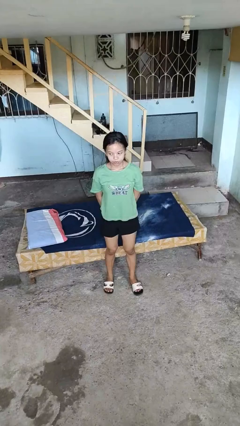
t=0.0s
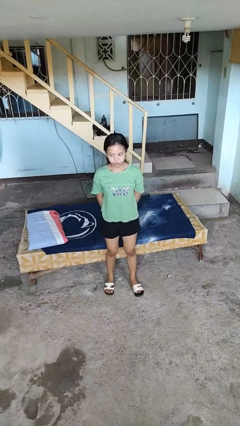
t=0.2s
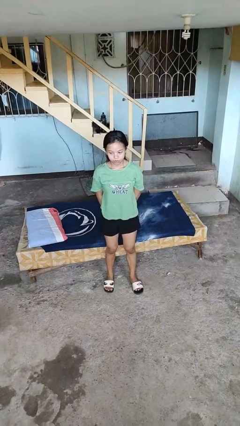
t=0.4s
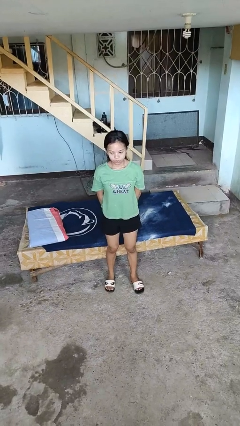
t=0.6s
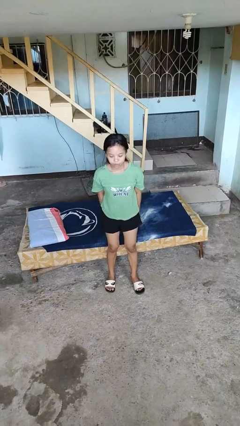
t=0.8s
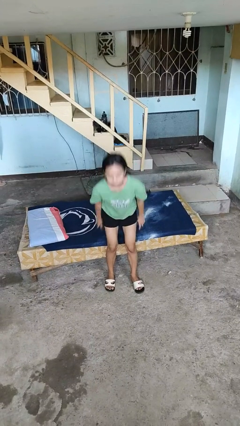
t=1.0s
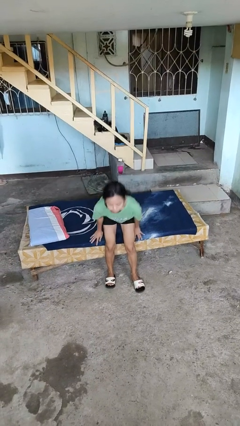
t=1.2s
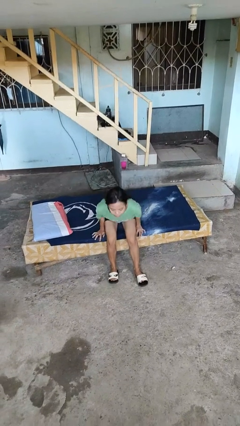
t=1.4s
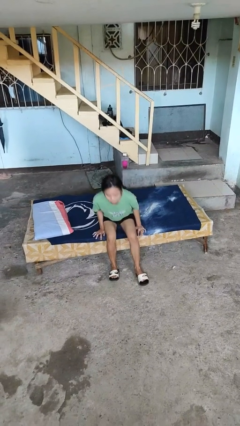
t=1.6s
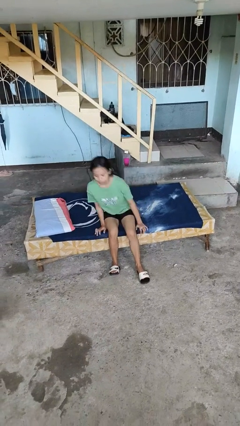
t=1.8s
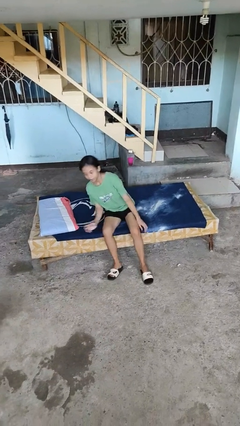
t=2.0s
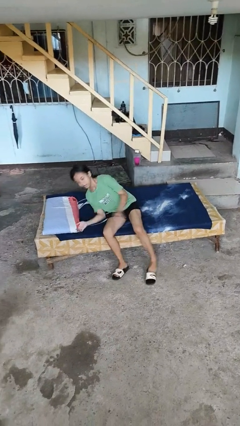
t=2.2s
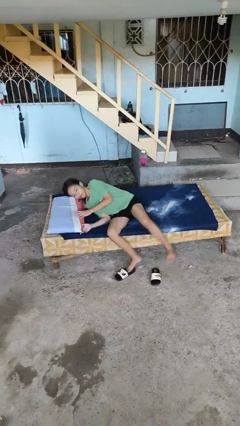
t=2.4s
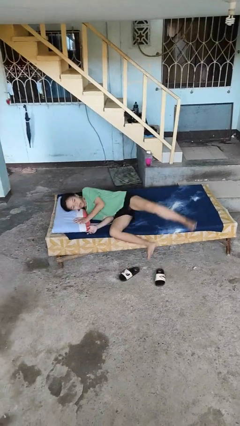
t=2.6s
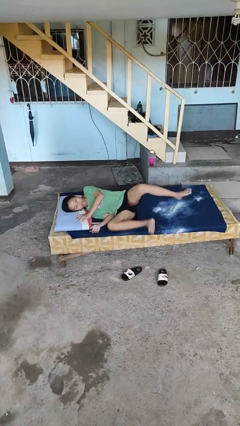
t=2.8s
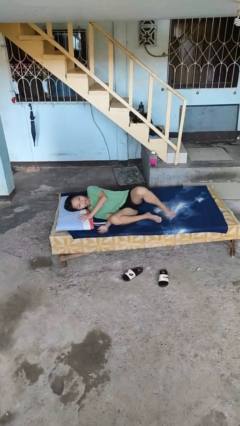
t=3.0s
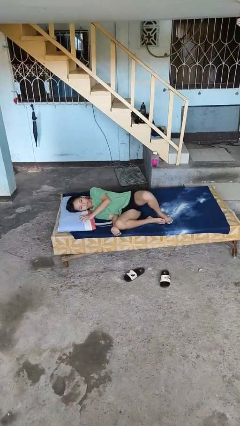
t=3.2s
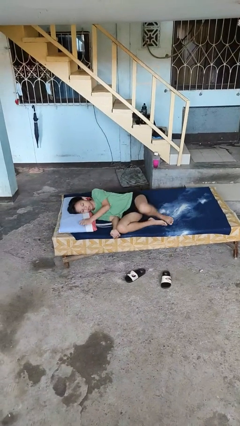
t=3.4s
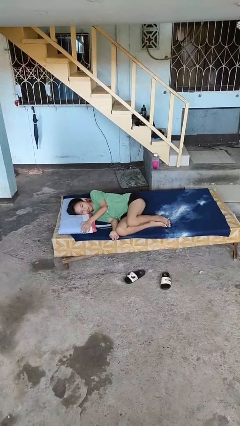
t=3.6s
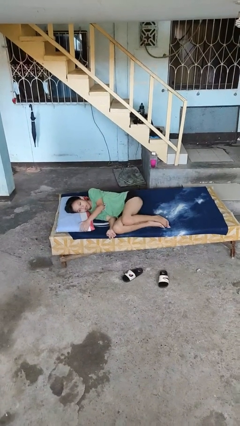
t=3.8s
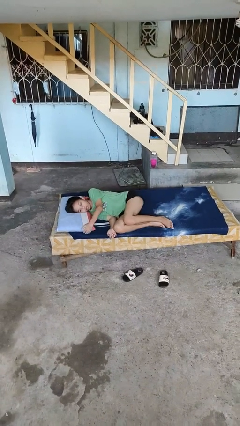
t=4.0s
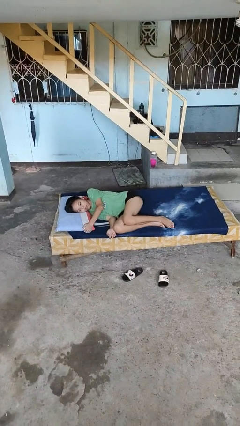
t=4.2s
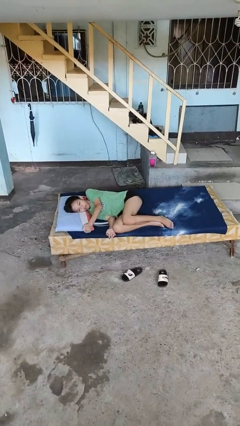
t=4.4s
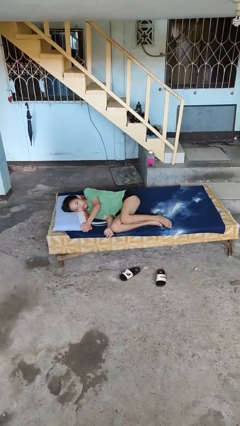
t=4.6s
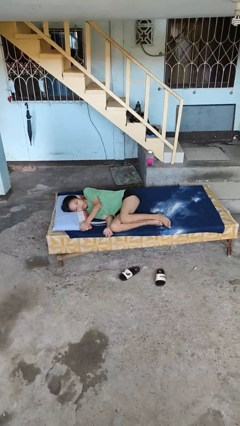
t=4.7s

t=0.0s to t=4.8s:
person lies down on bed

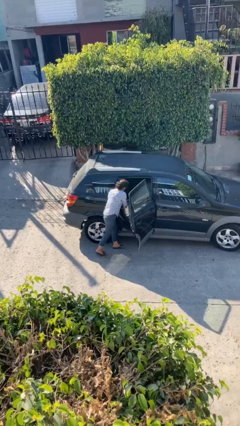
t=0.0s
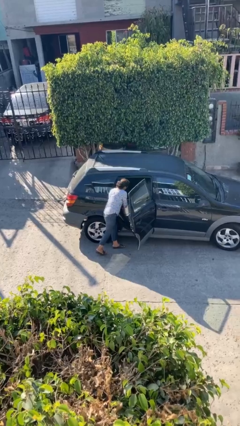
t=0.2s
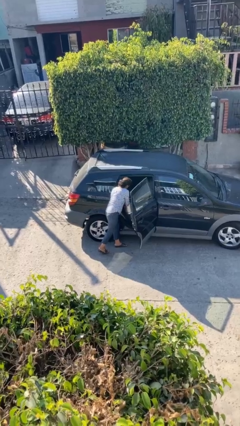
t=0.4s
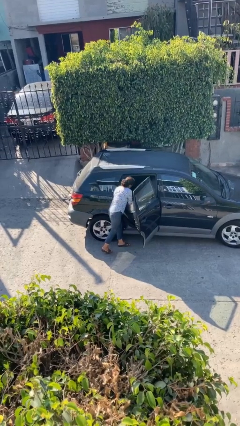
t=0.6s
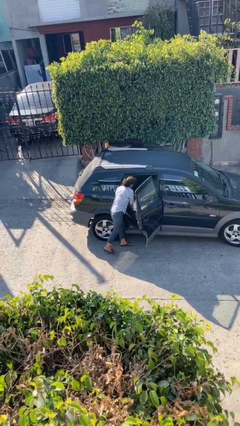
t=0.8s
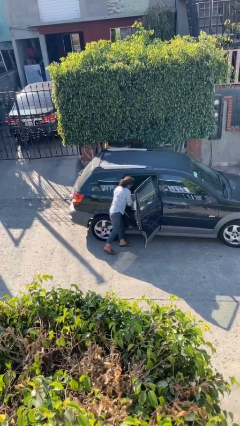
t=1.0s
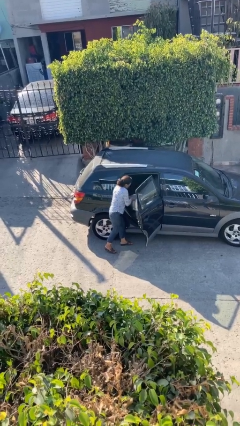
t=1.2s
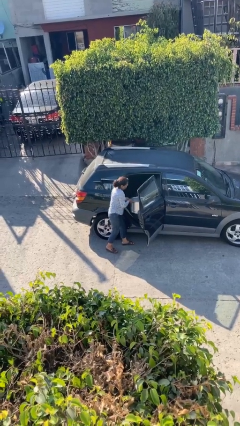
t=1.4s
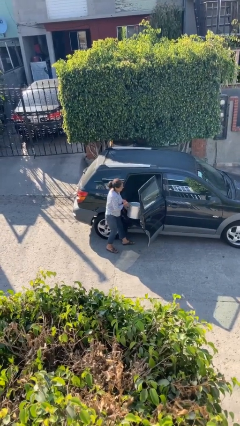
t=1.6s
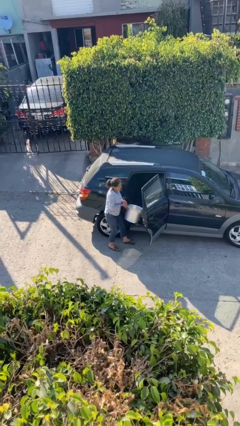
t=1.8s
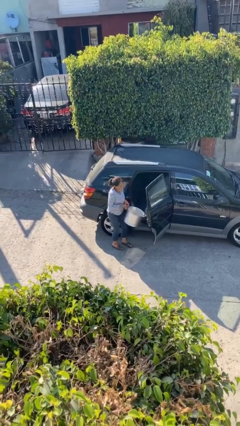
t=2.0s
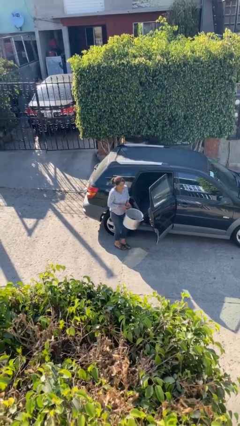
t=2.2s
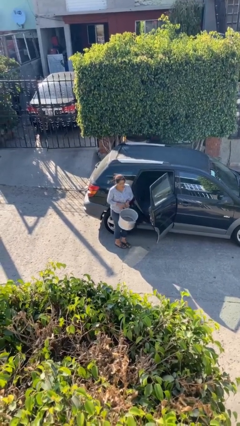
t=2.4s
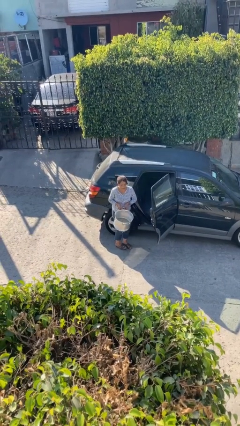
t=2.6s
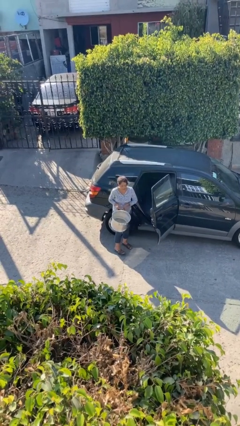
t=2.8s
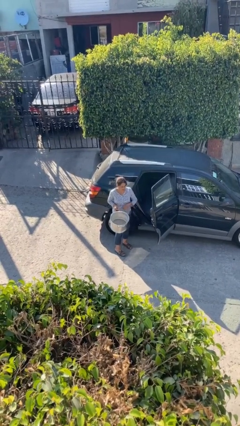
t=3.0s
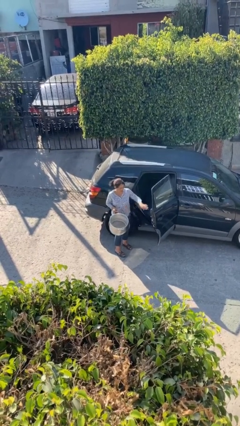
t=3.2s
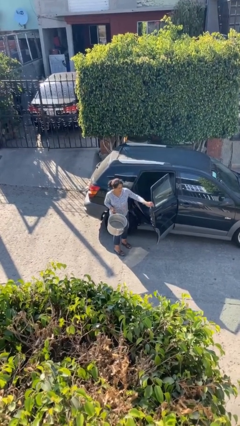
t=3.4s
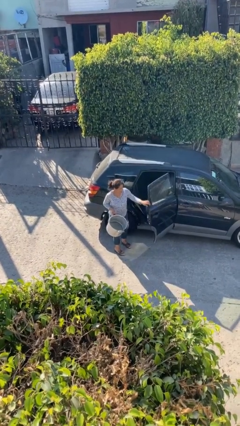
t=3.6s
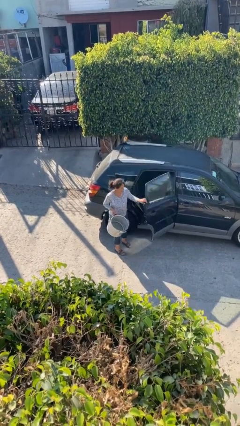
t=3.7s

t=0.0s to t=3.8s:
person unloads car

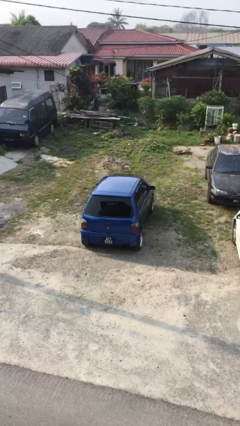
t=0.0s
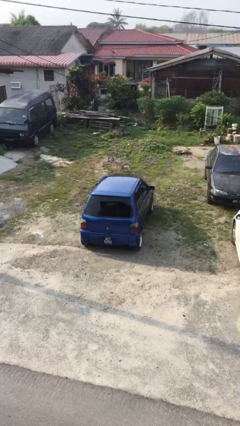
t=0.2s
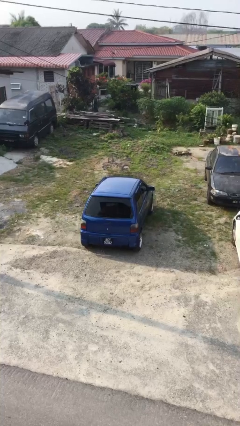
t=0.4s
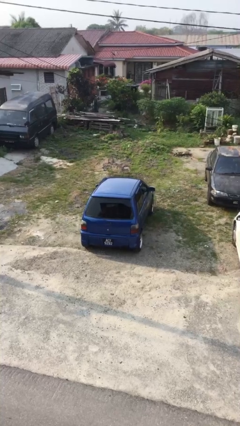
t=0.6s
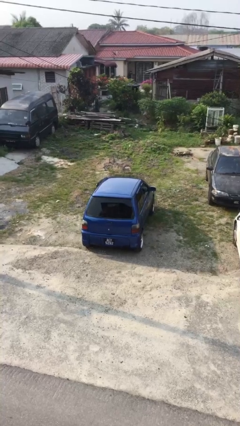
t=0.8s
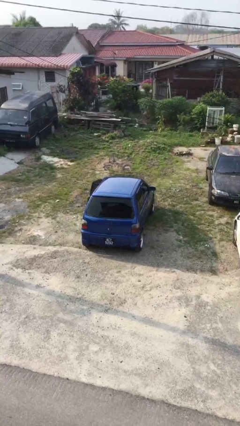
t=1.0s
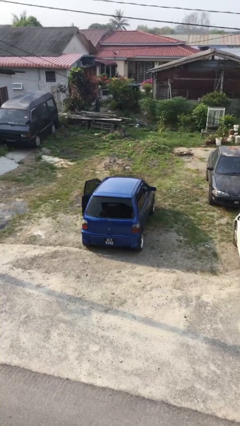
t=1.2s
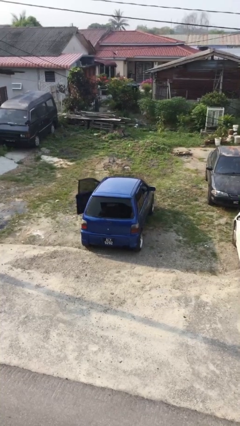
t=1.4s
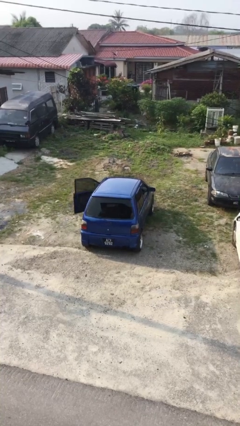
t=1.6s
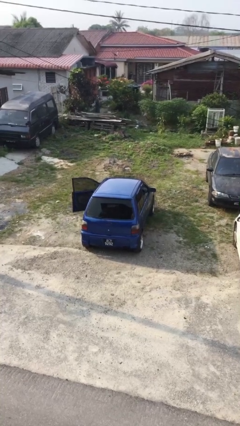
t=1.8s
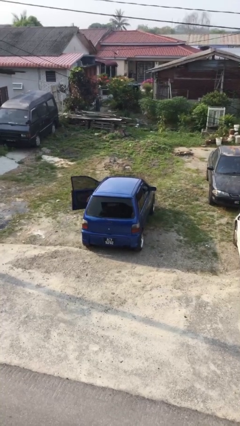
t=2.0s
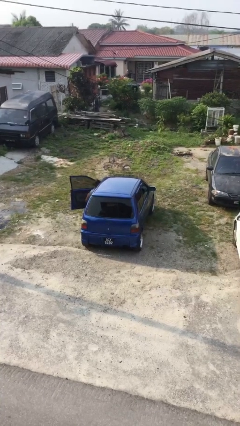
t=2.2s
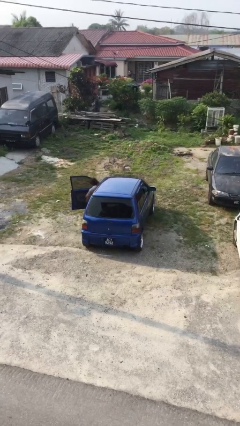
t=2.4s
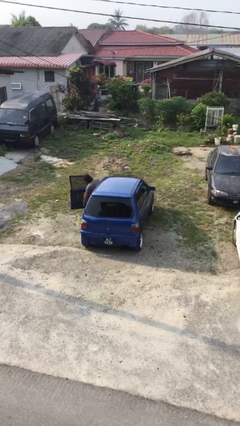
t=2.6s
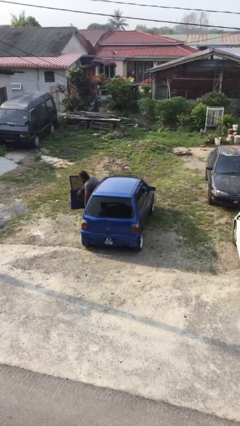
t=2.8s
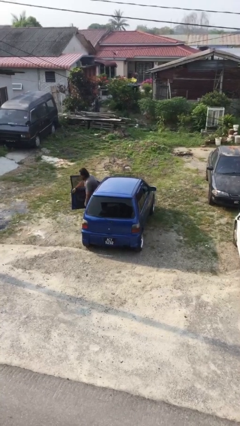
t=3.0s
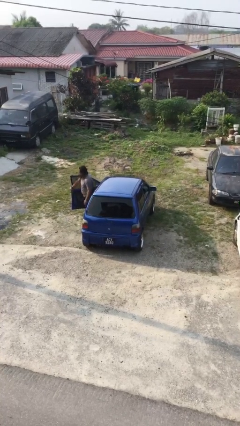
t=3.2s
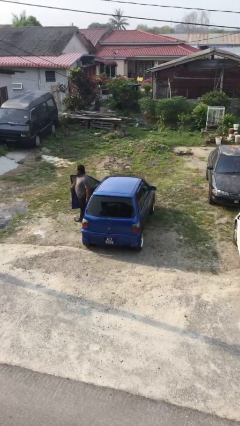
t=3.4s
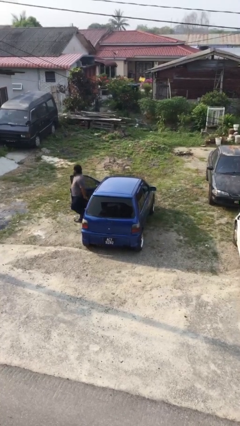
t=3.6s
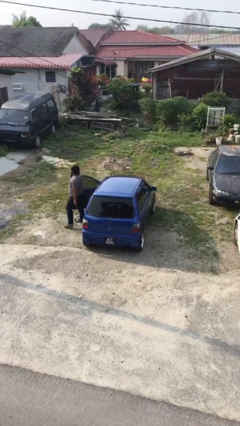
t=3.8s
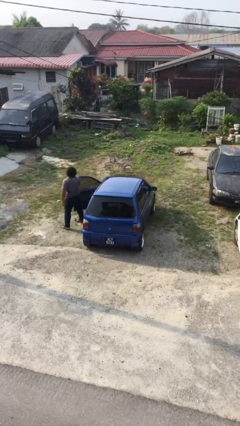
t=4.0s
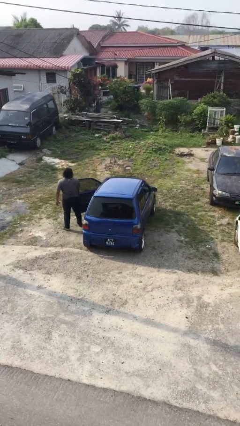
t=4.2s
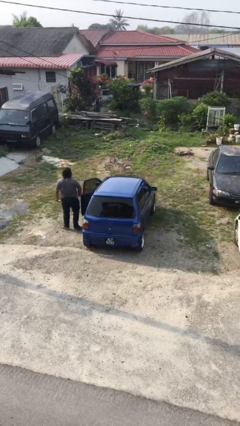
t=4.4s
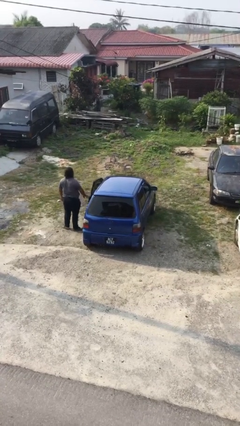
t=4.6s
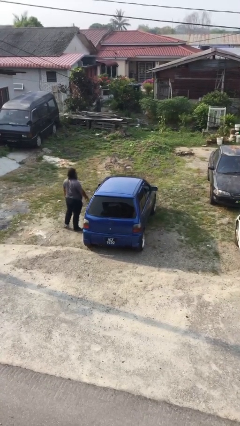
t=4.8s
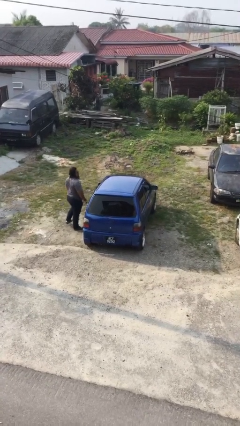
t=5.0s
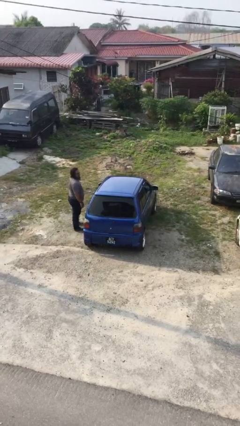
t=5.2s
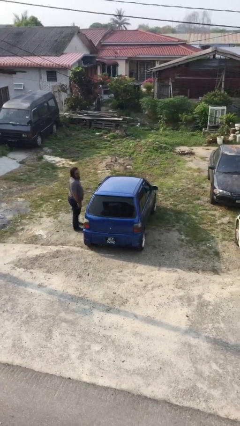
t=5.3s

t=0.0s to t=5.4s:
car drops off person

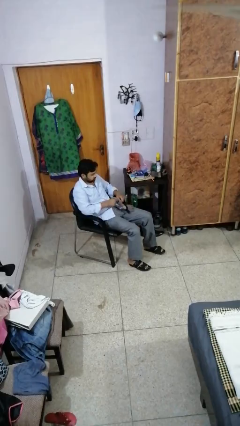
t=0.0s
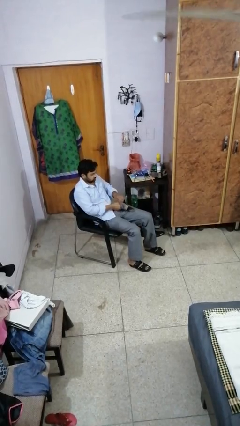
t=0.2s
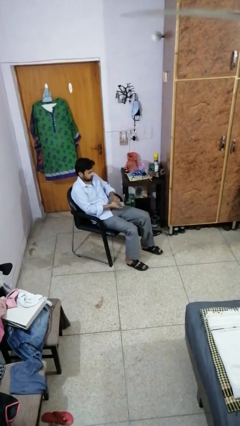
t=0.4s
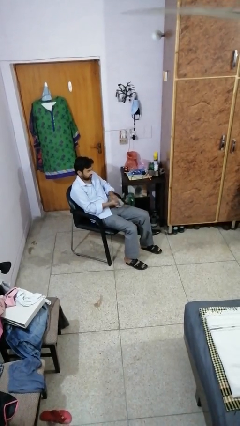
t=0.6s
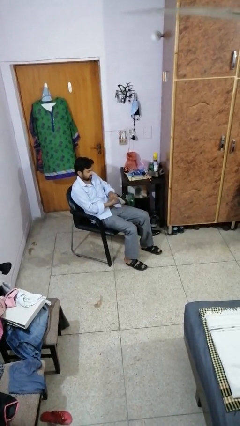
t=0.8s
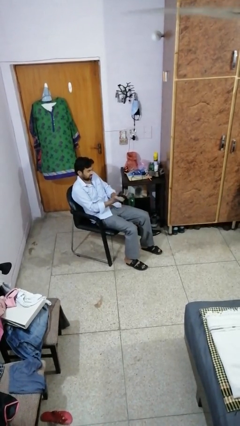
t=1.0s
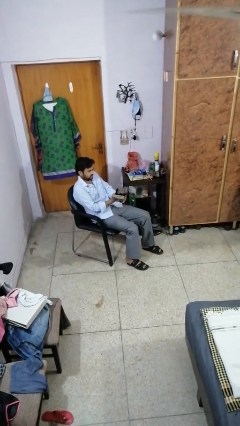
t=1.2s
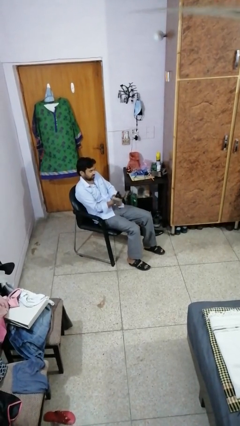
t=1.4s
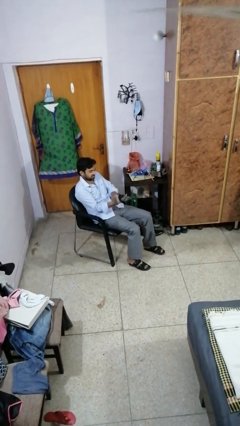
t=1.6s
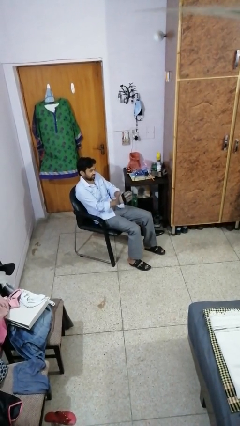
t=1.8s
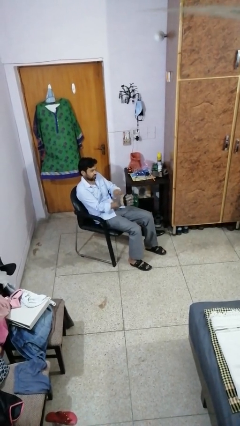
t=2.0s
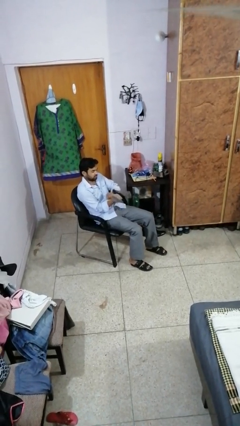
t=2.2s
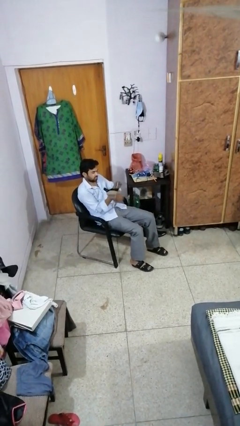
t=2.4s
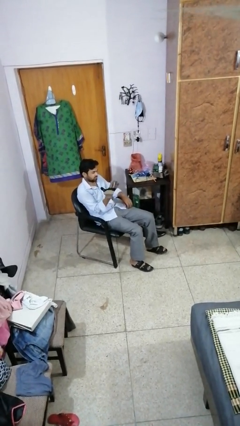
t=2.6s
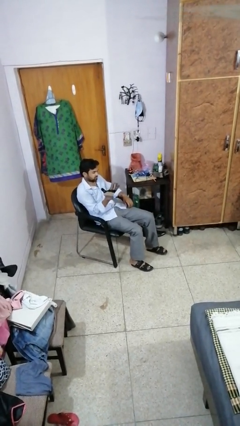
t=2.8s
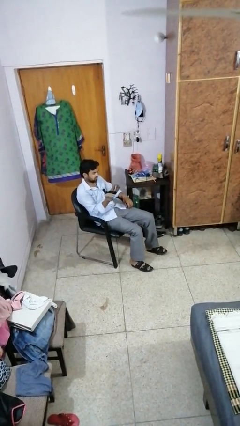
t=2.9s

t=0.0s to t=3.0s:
person puts on gloves

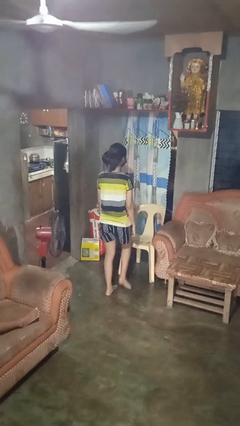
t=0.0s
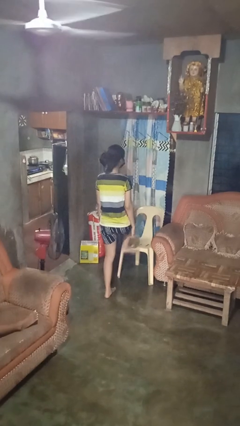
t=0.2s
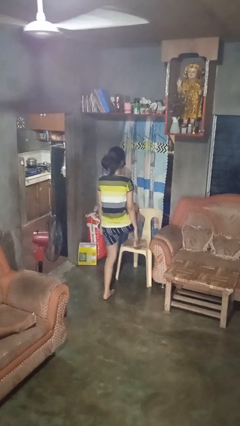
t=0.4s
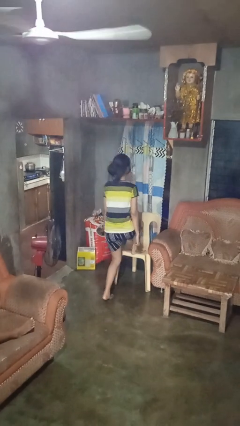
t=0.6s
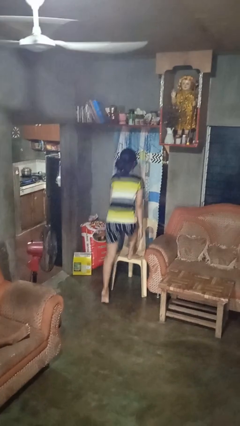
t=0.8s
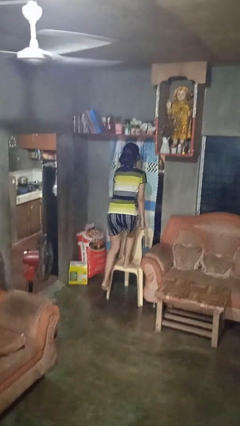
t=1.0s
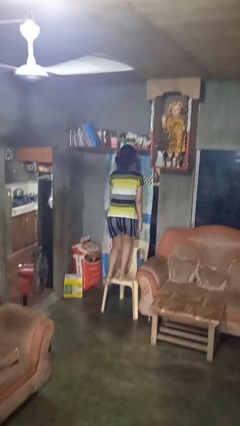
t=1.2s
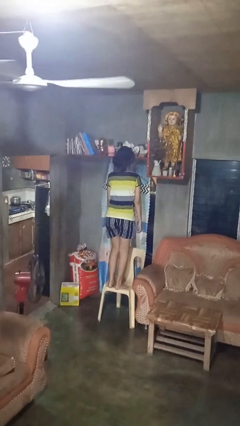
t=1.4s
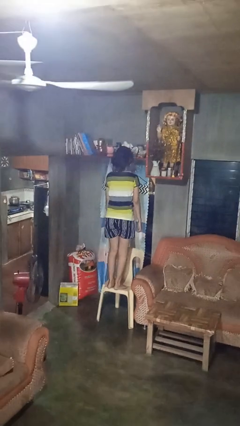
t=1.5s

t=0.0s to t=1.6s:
person climbs on chair
